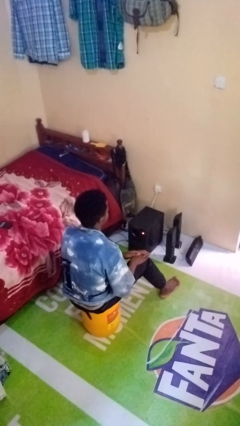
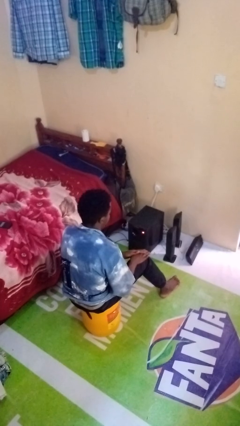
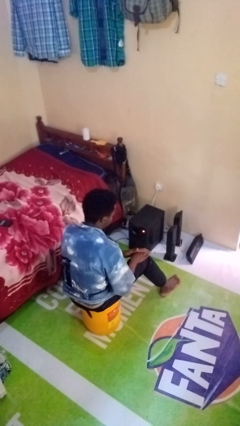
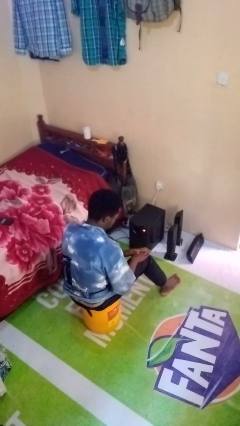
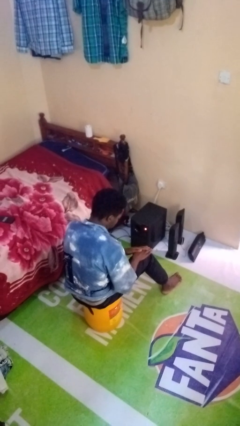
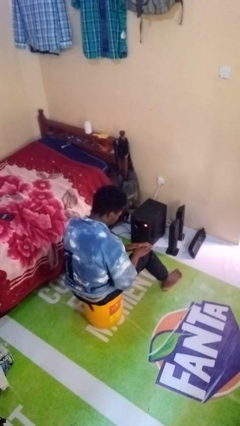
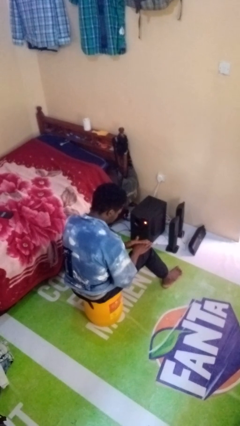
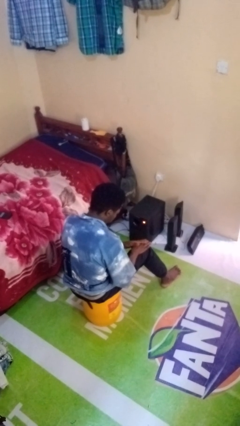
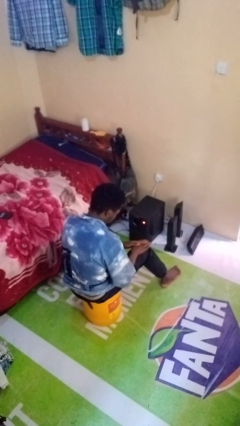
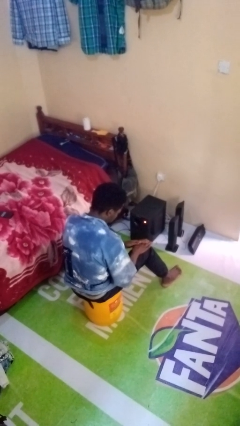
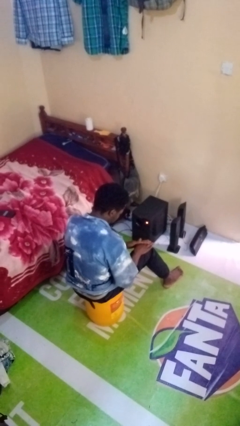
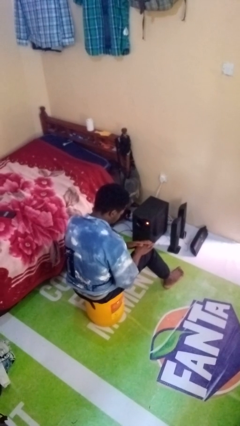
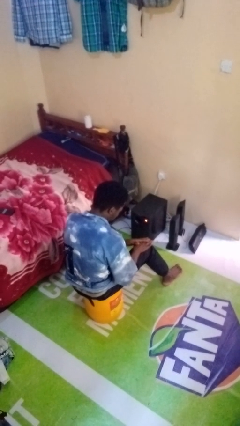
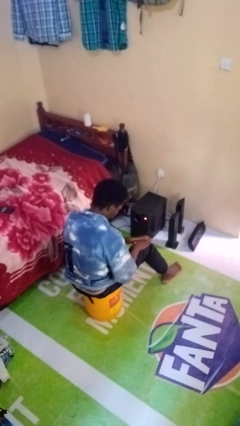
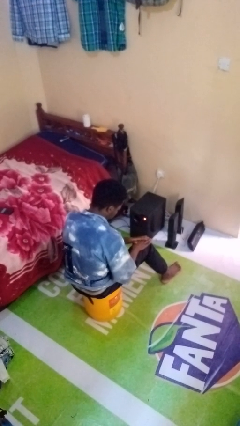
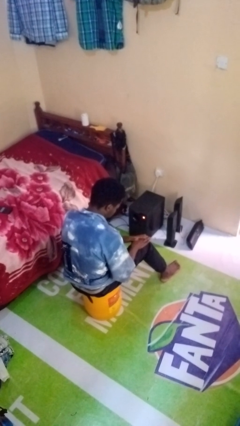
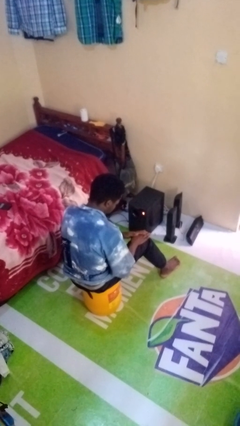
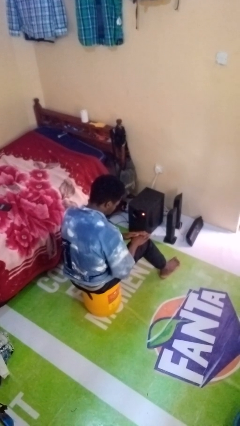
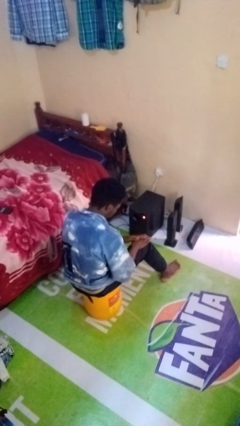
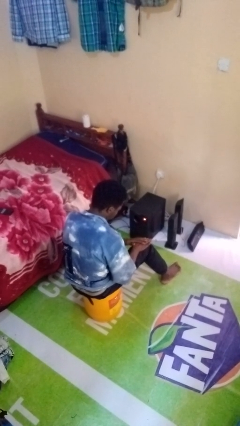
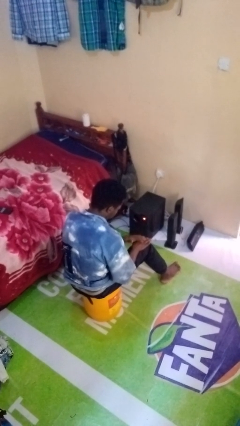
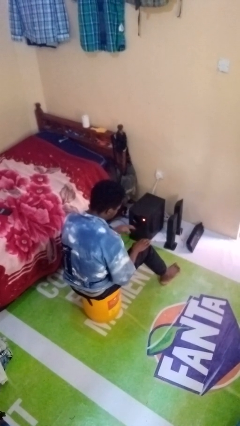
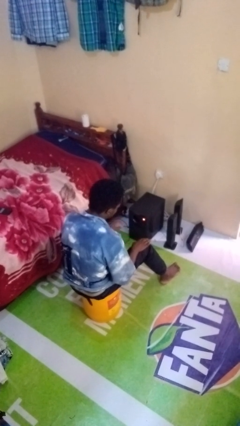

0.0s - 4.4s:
person looks at hands in lap

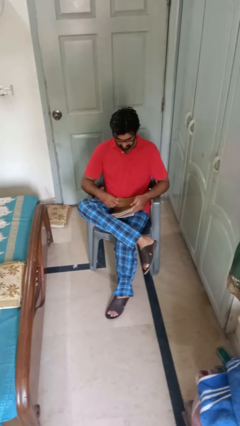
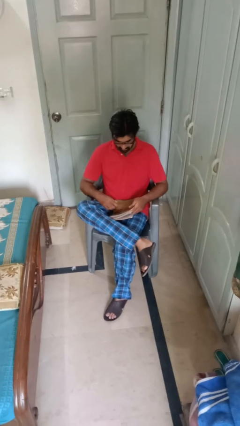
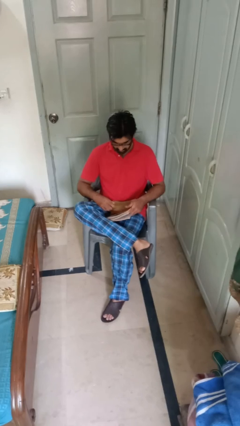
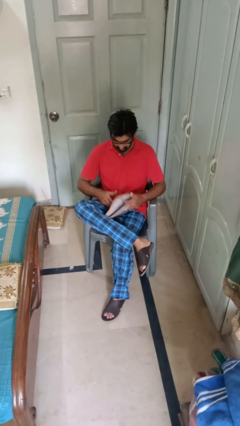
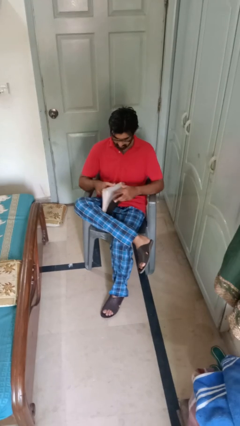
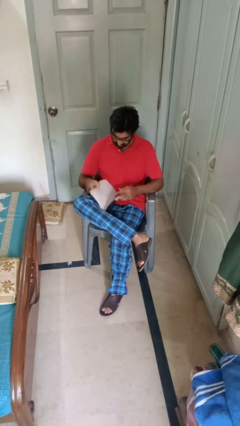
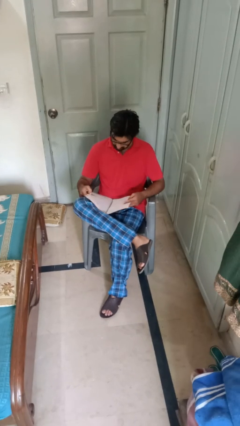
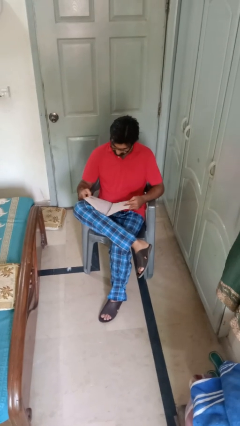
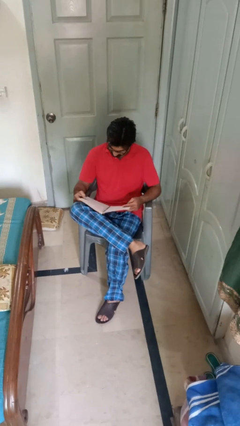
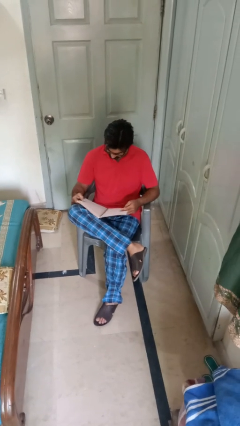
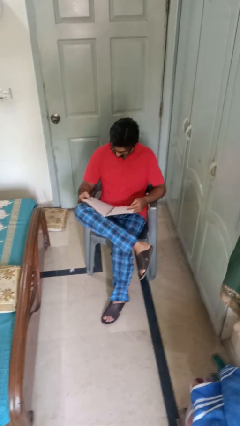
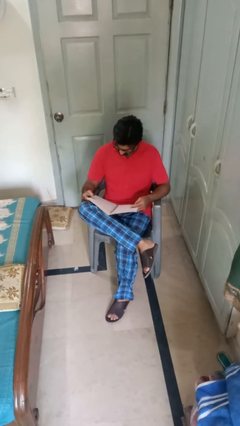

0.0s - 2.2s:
person reads magazine

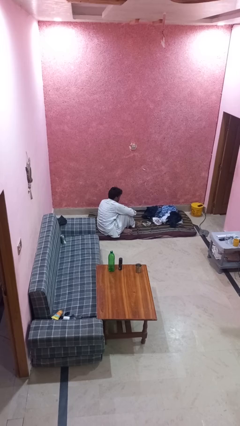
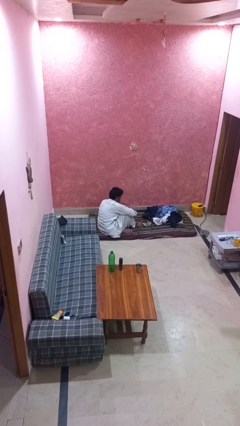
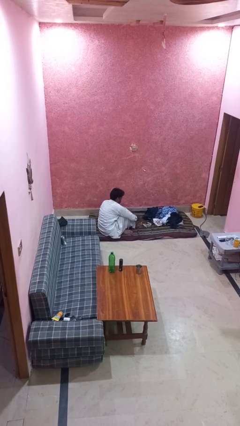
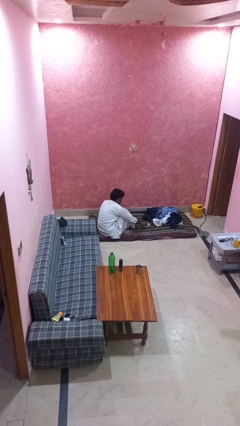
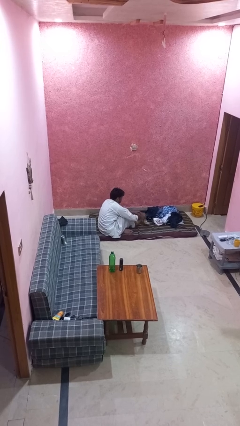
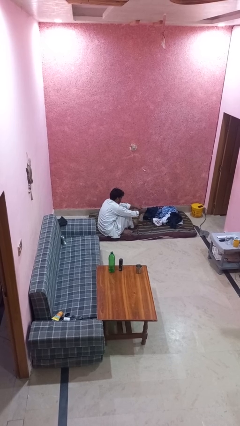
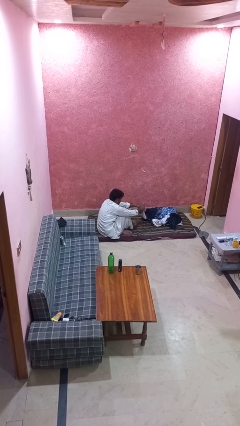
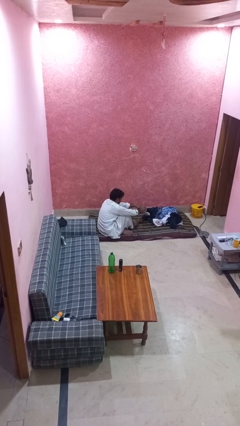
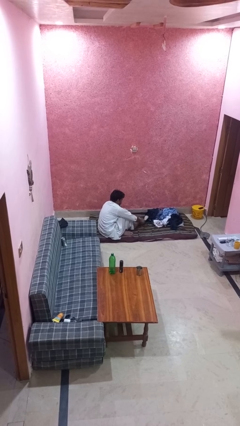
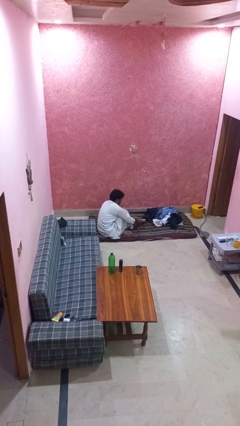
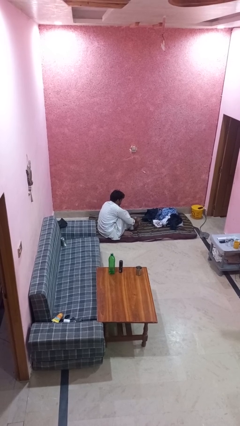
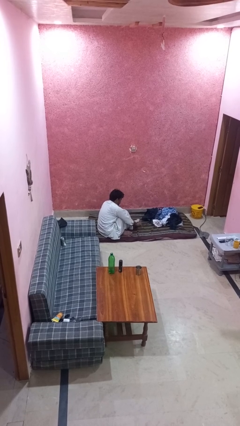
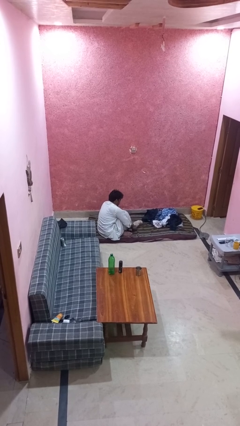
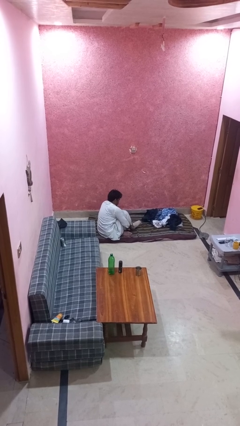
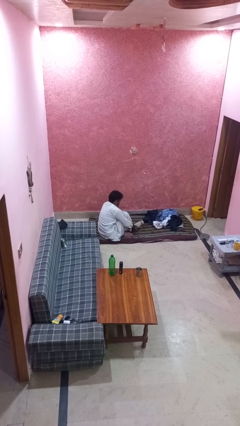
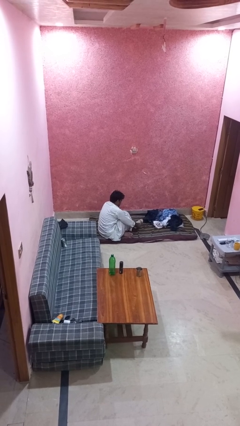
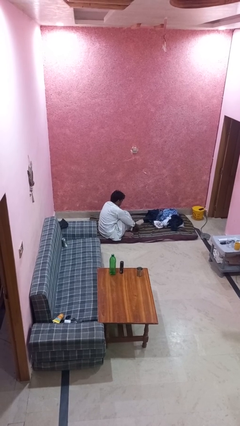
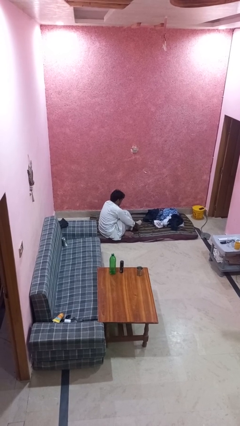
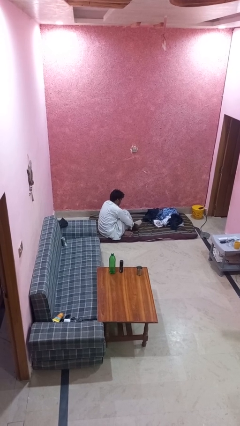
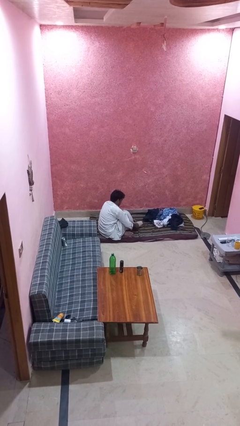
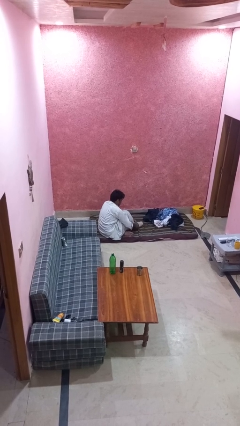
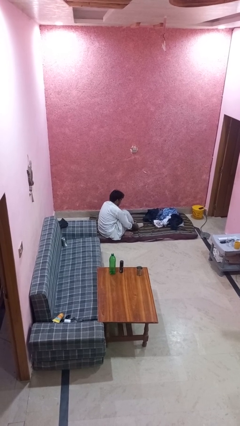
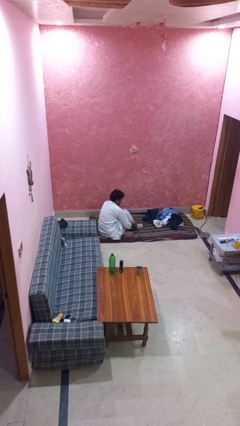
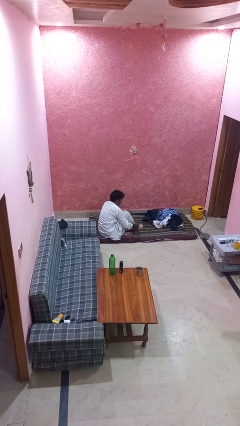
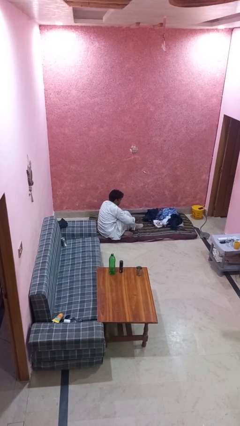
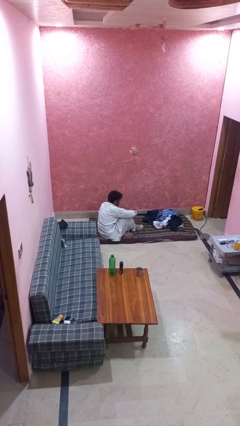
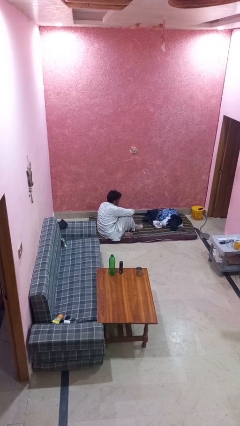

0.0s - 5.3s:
person puts on socks

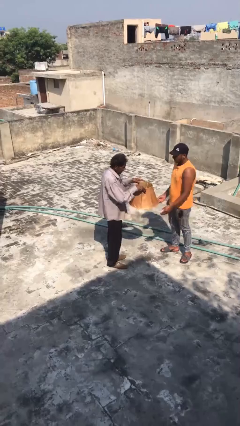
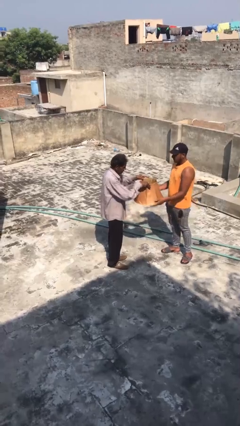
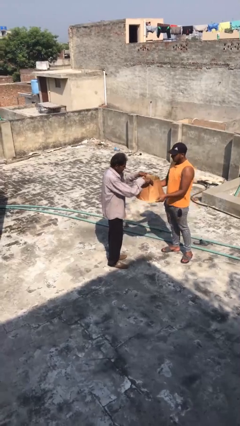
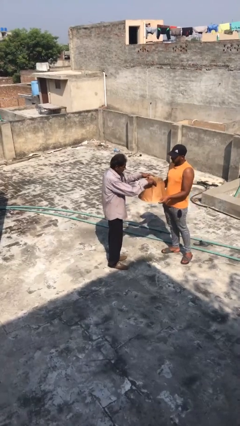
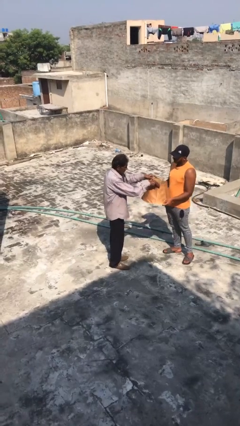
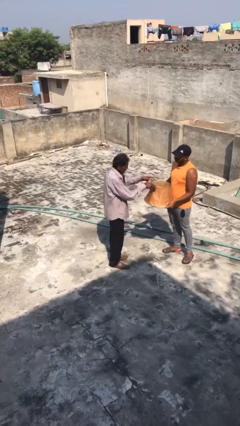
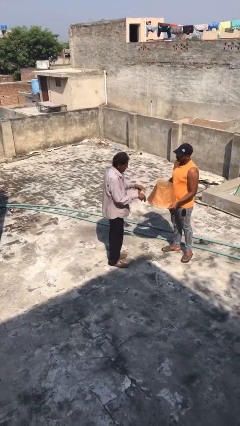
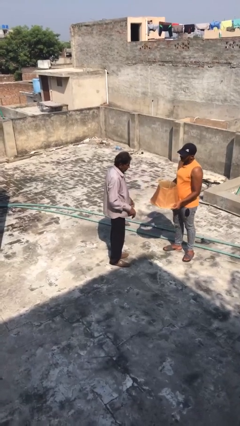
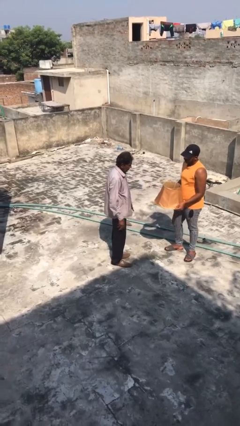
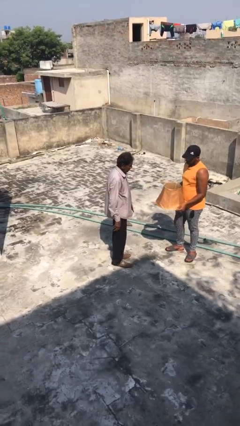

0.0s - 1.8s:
person transfers object to person

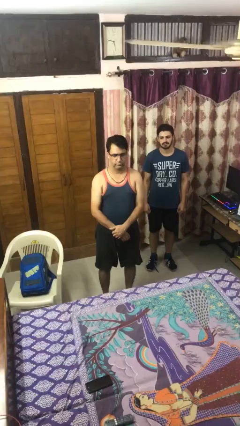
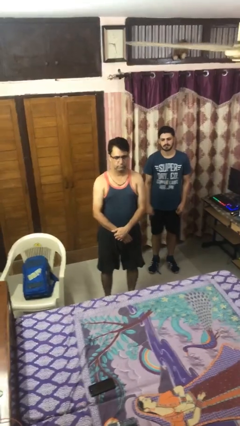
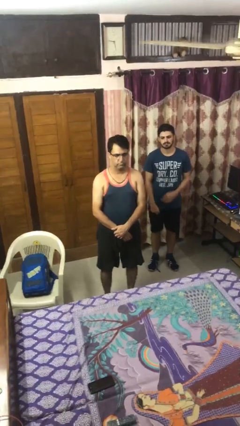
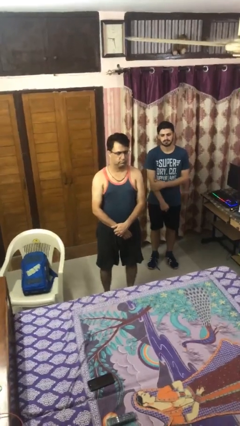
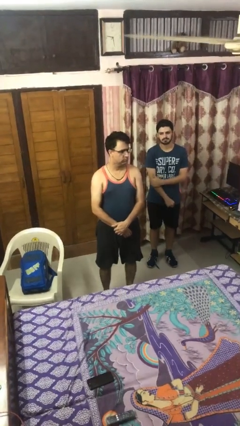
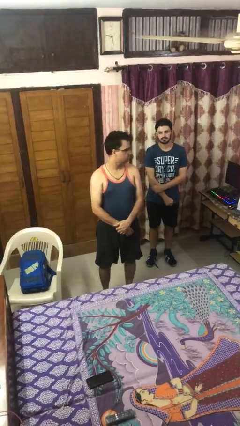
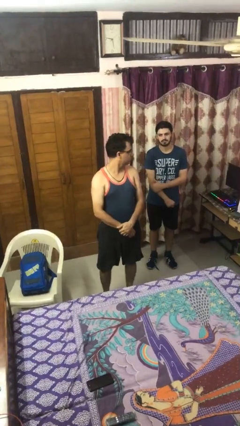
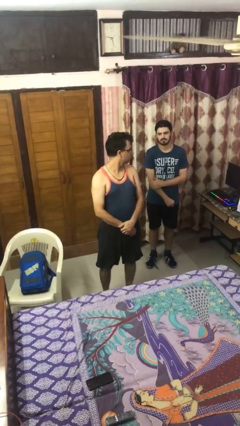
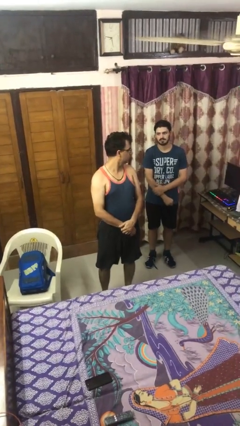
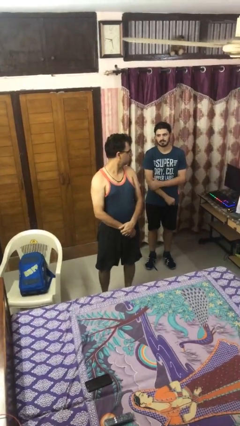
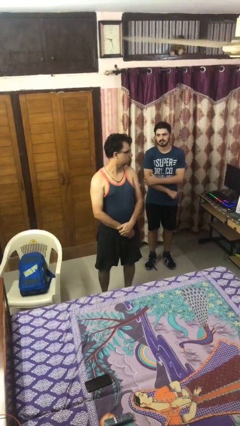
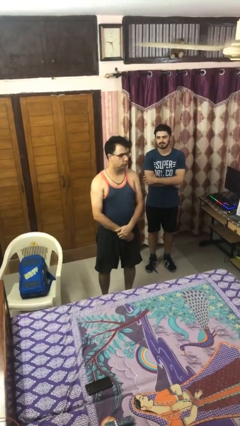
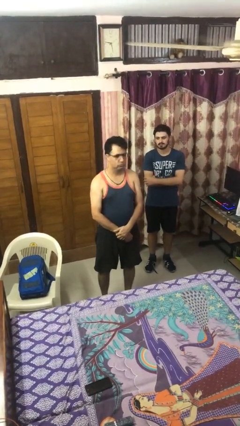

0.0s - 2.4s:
person looks over shoulder

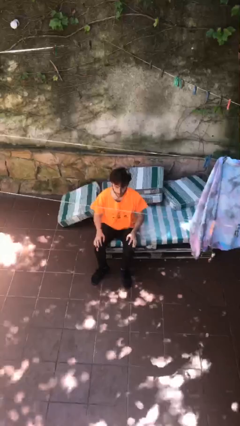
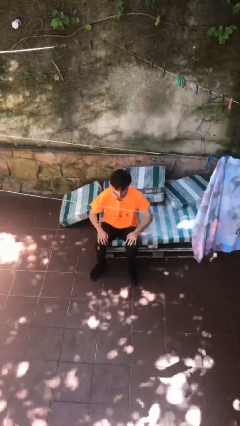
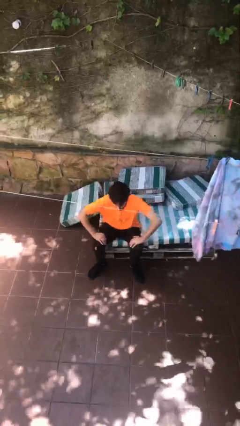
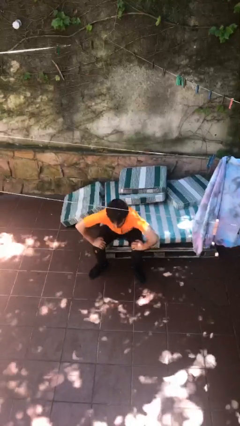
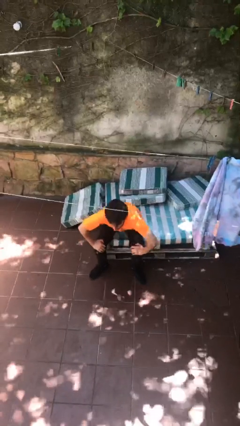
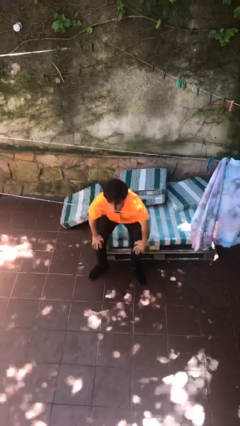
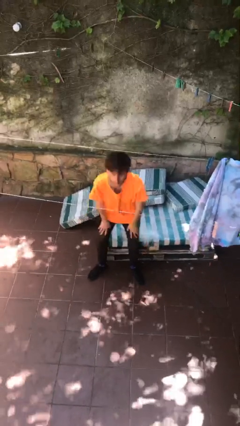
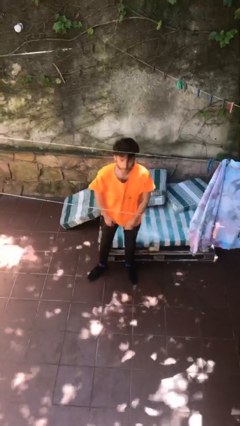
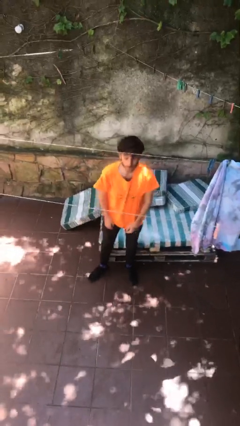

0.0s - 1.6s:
person stands up

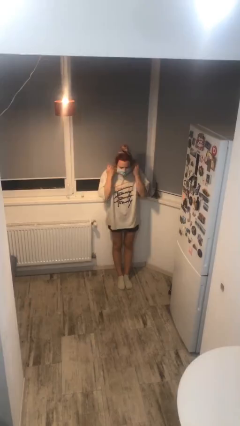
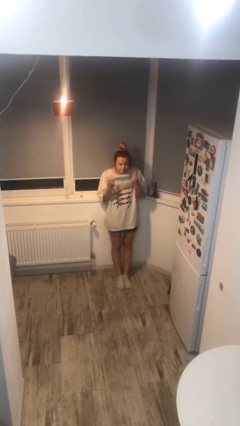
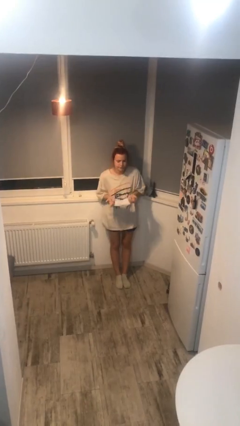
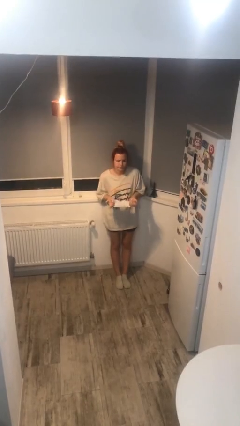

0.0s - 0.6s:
person takes off facemask
